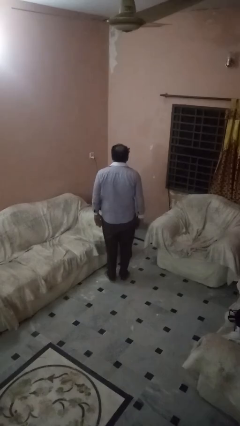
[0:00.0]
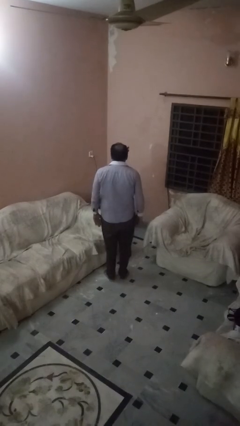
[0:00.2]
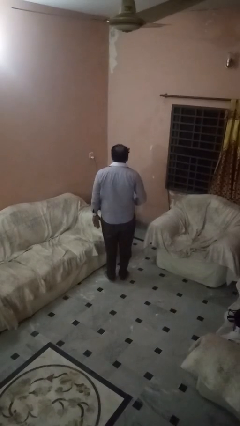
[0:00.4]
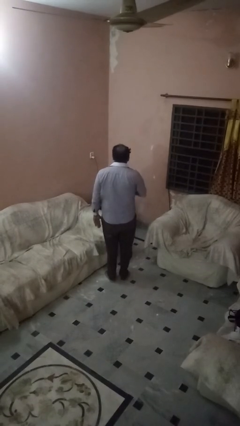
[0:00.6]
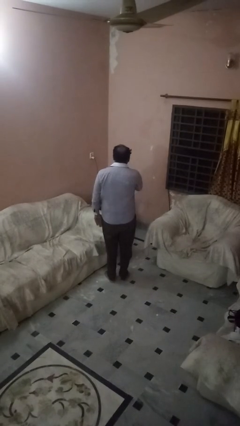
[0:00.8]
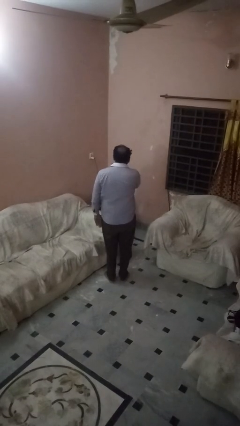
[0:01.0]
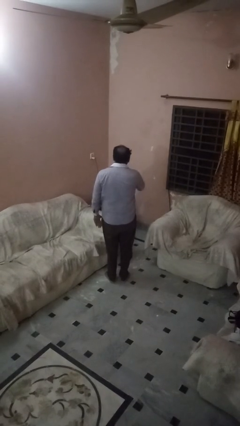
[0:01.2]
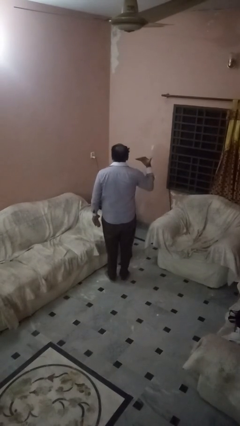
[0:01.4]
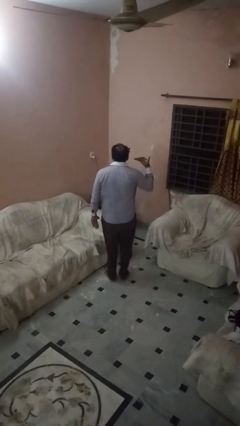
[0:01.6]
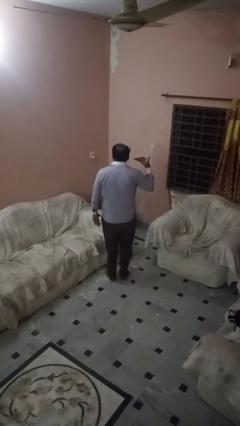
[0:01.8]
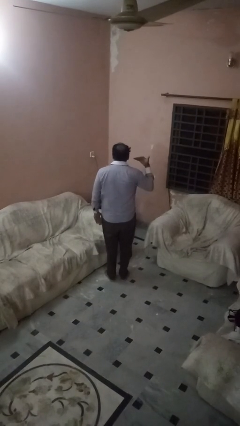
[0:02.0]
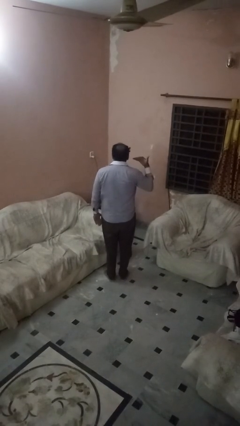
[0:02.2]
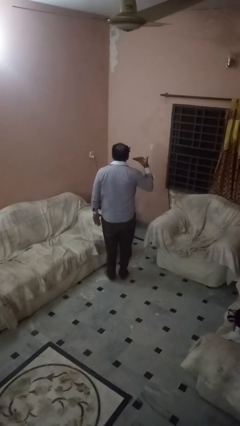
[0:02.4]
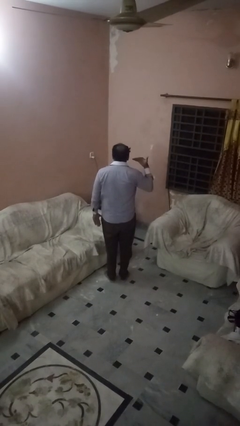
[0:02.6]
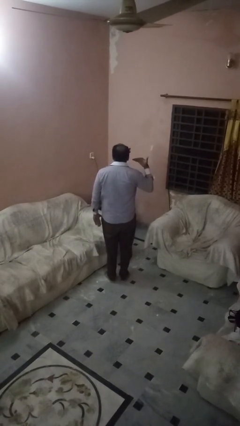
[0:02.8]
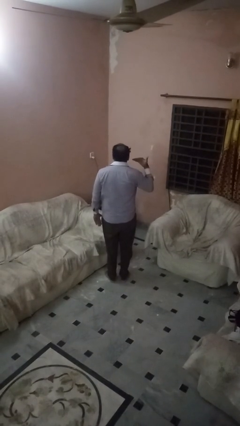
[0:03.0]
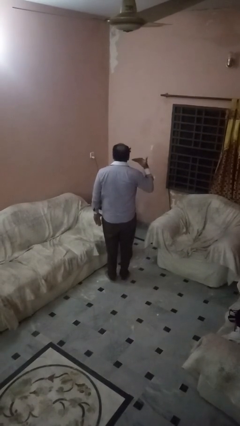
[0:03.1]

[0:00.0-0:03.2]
person gestures cut

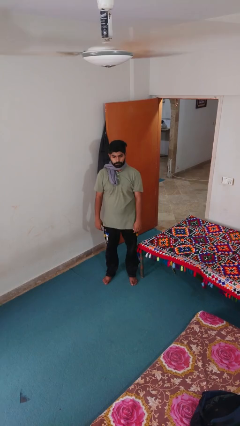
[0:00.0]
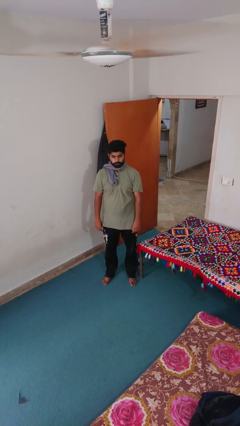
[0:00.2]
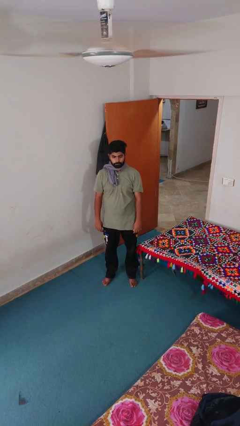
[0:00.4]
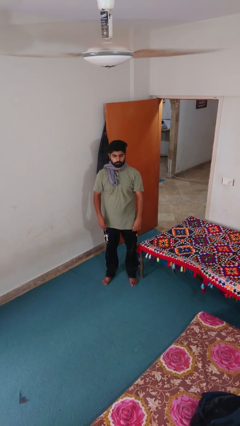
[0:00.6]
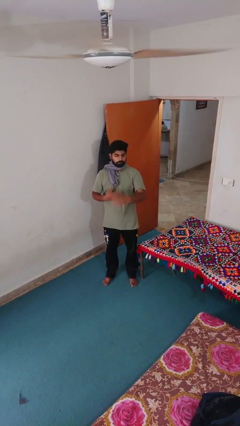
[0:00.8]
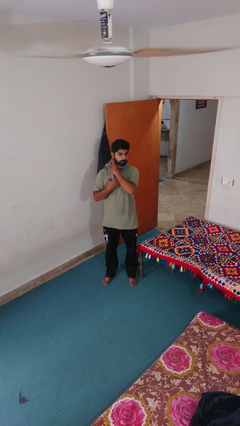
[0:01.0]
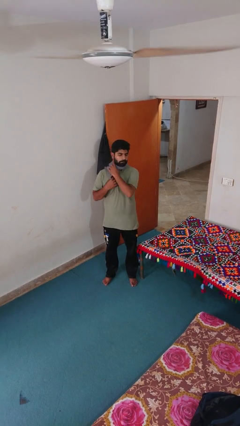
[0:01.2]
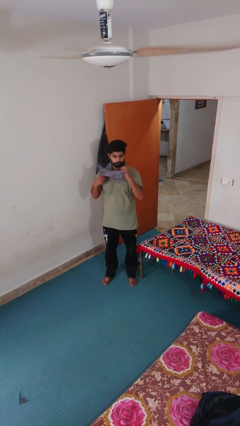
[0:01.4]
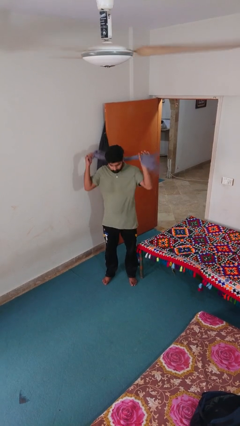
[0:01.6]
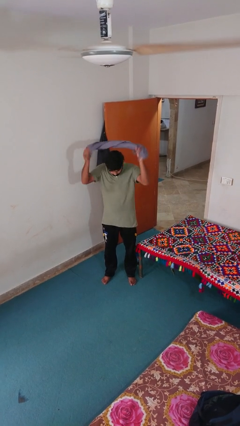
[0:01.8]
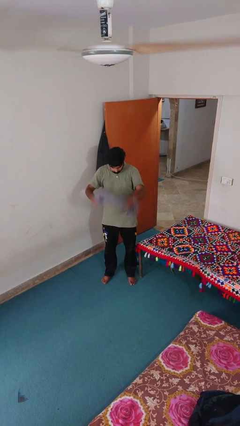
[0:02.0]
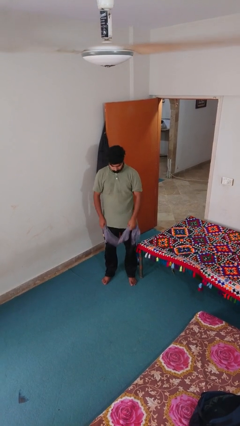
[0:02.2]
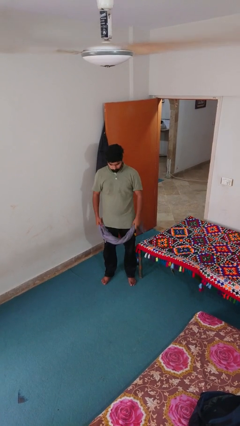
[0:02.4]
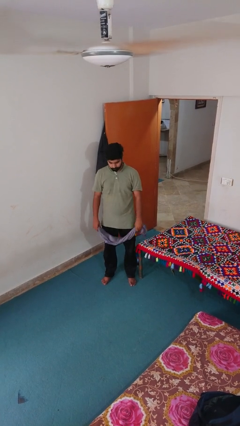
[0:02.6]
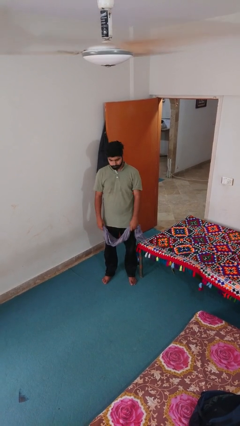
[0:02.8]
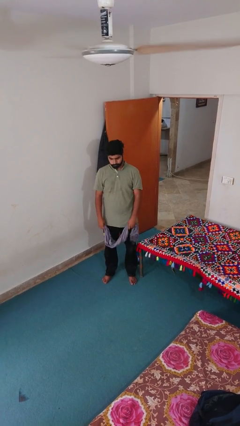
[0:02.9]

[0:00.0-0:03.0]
person takes off scarf

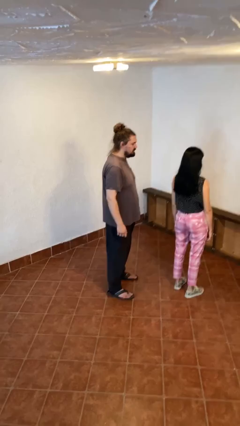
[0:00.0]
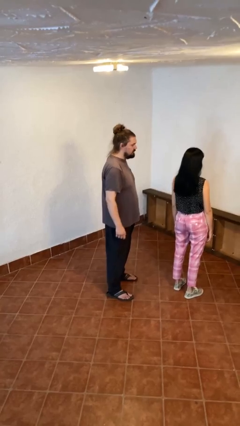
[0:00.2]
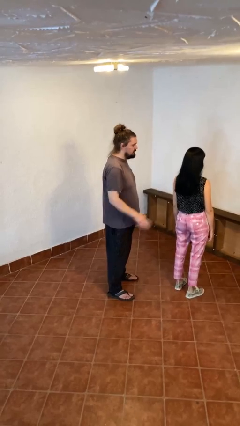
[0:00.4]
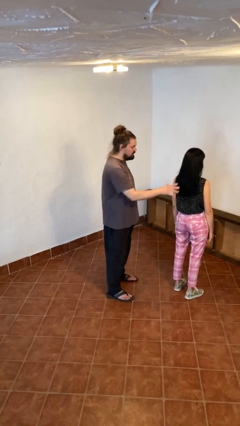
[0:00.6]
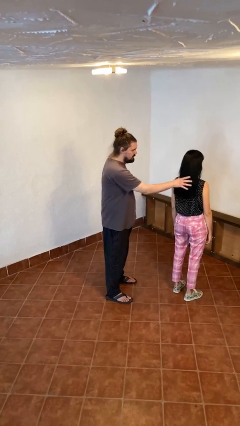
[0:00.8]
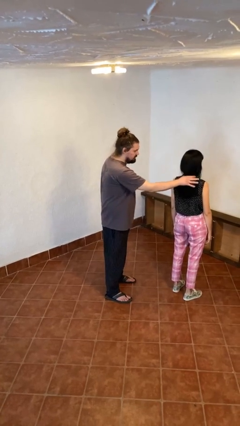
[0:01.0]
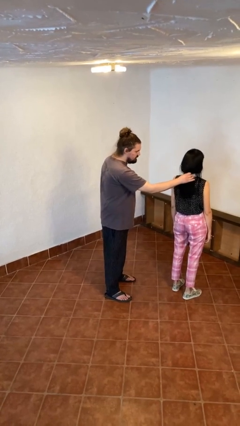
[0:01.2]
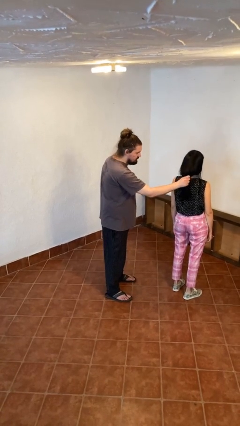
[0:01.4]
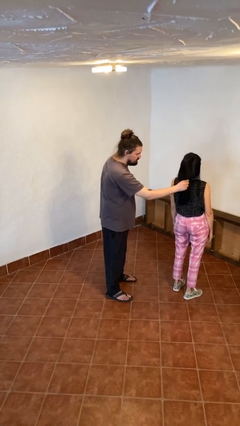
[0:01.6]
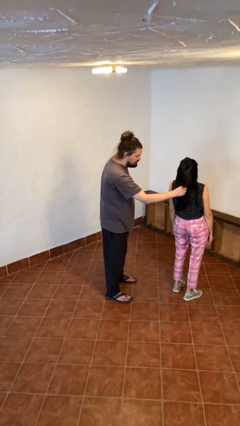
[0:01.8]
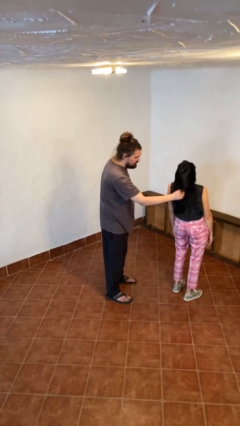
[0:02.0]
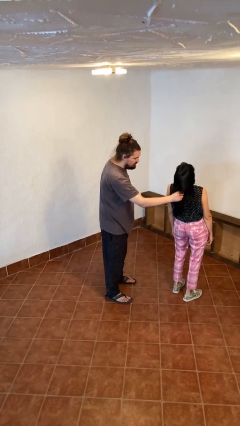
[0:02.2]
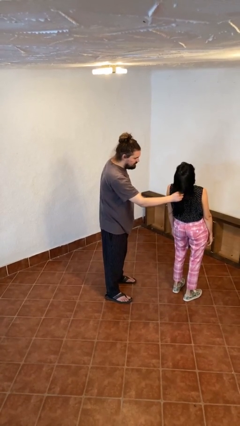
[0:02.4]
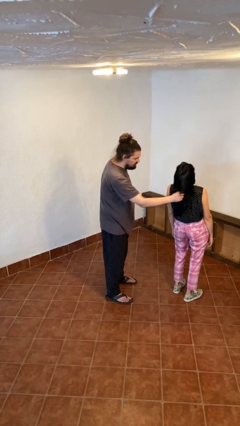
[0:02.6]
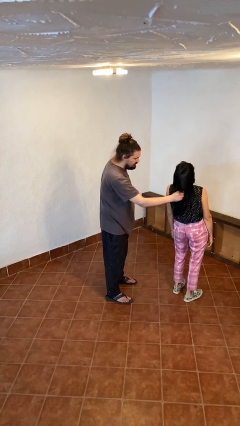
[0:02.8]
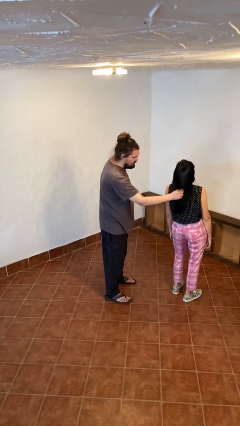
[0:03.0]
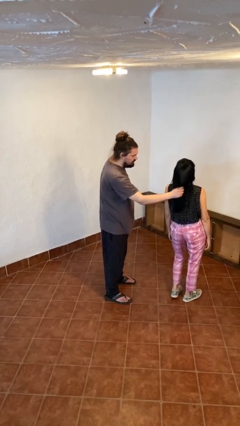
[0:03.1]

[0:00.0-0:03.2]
person grabs person by hair

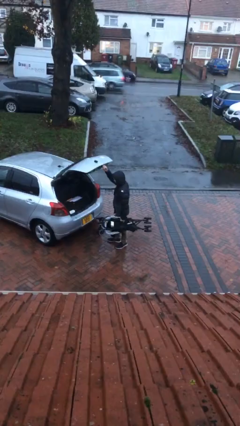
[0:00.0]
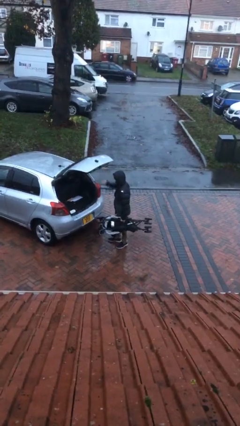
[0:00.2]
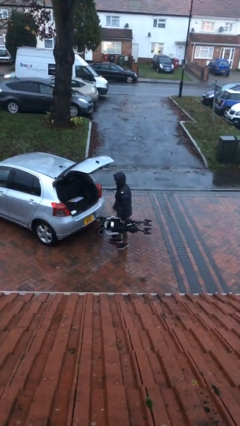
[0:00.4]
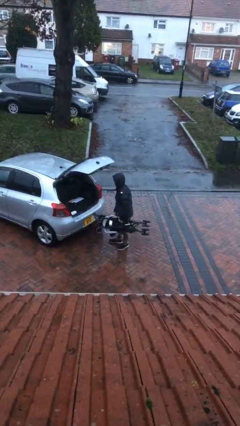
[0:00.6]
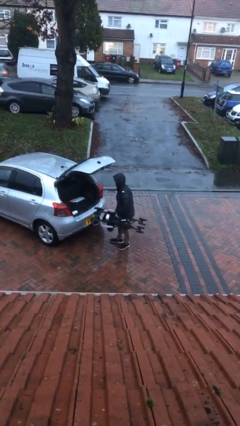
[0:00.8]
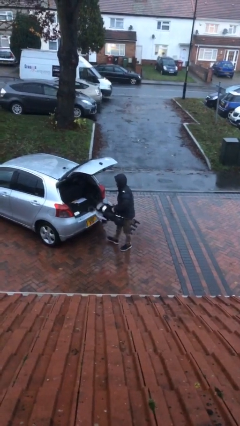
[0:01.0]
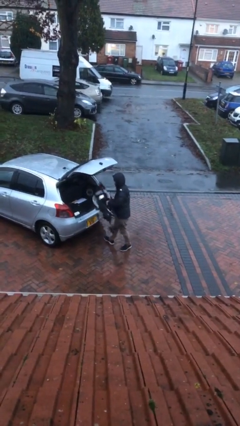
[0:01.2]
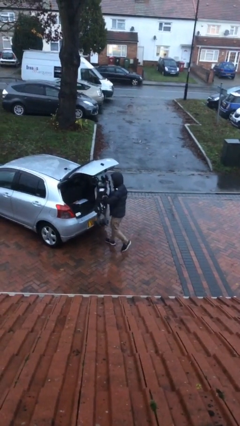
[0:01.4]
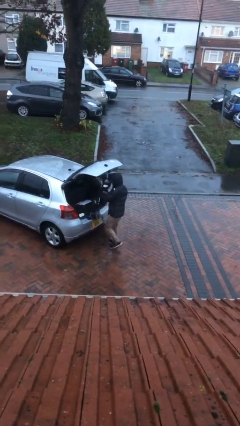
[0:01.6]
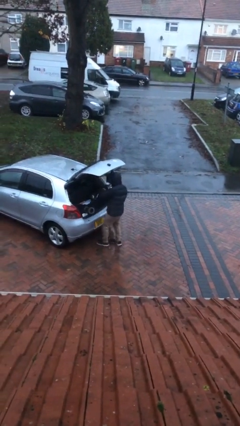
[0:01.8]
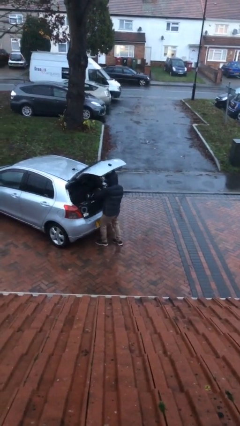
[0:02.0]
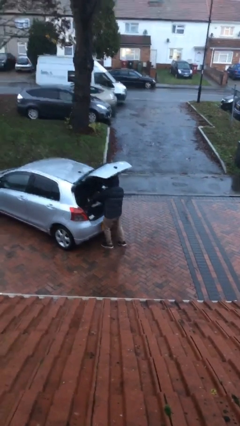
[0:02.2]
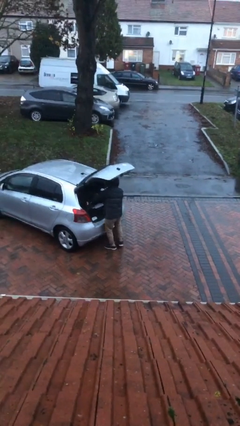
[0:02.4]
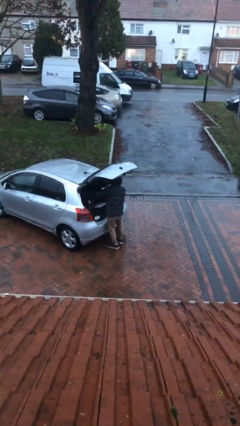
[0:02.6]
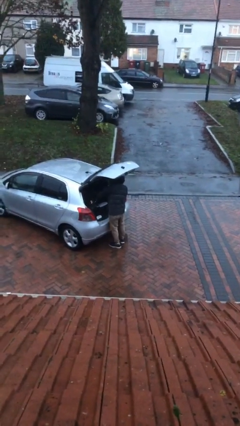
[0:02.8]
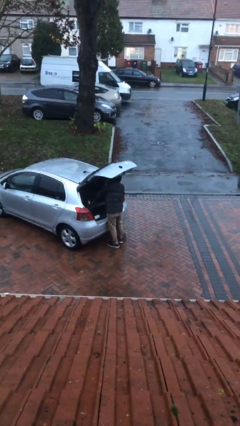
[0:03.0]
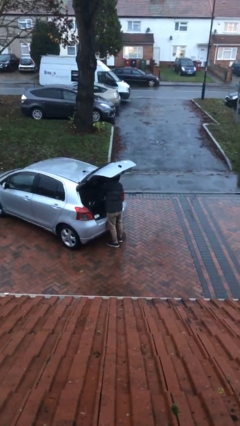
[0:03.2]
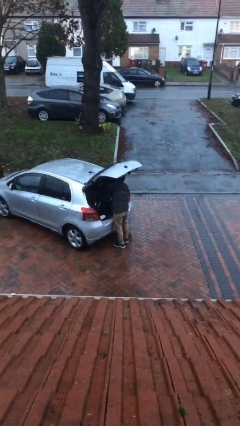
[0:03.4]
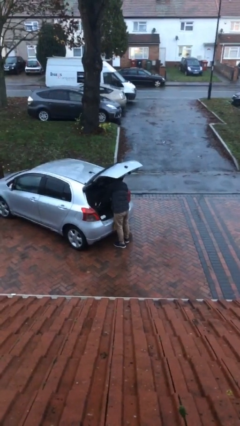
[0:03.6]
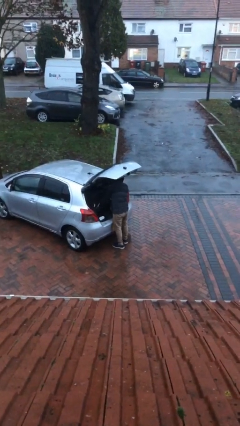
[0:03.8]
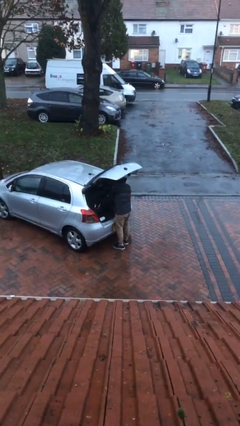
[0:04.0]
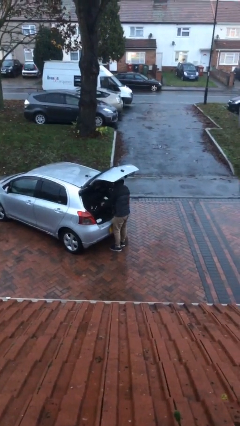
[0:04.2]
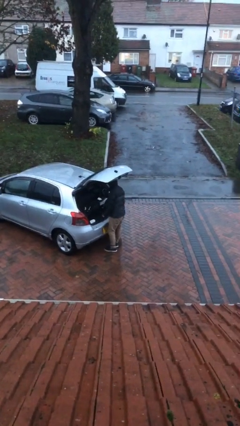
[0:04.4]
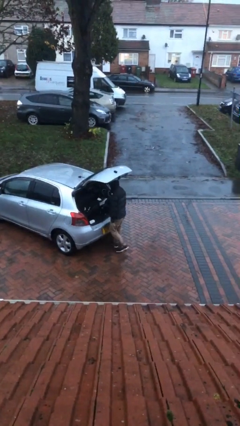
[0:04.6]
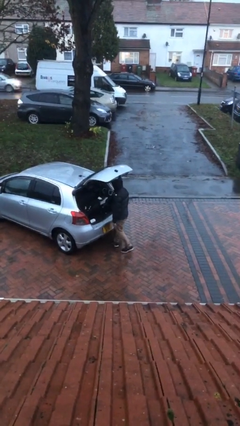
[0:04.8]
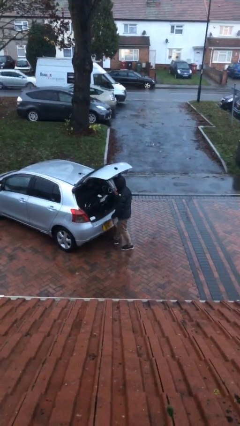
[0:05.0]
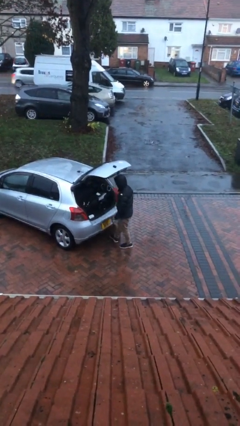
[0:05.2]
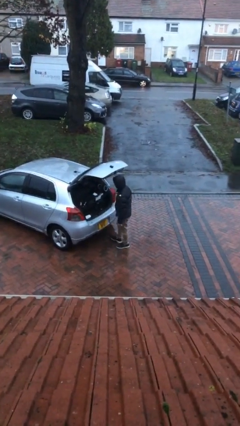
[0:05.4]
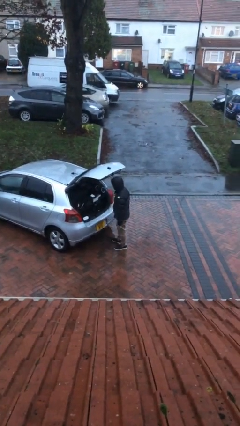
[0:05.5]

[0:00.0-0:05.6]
person loads car

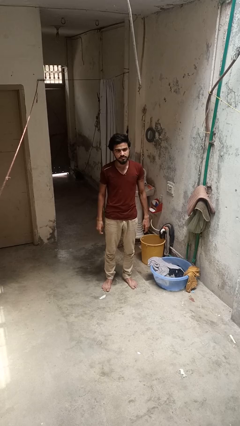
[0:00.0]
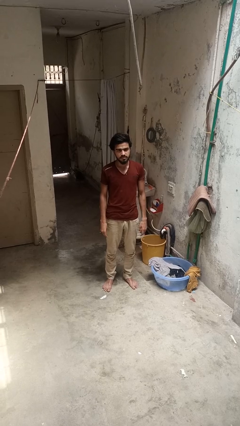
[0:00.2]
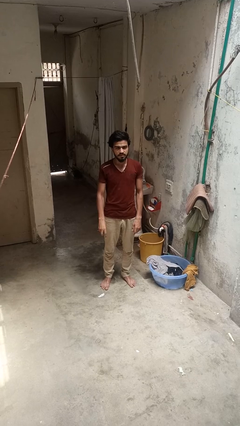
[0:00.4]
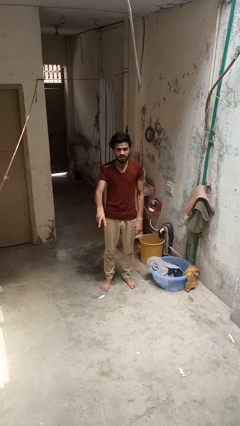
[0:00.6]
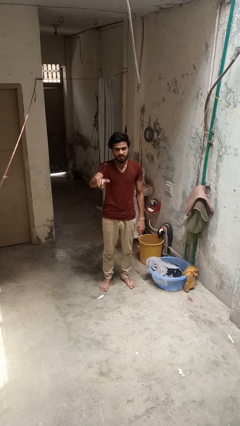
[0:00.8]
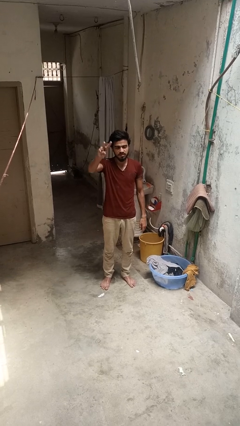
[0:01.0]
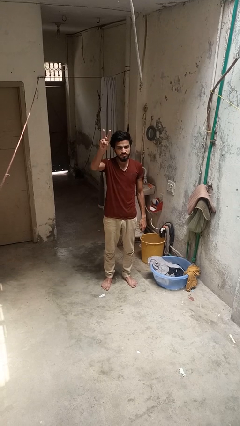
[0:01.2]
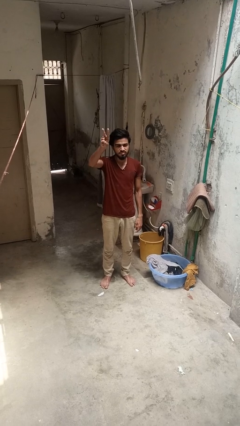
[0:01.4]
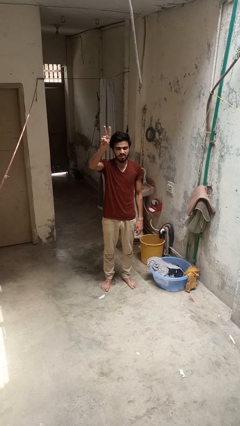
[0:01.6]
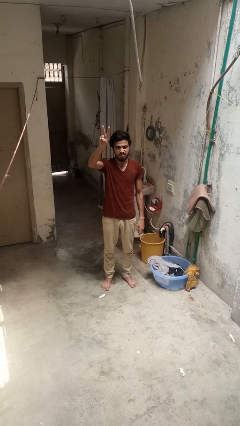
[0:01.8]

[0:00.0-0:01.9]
person gestures peace

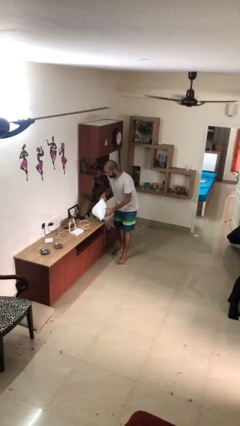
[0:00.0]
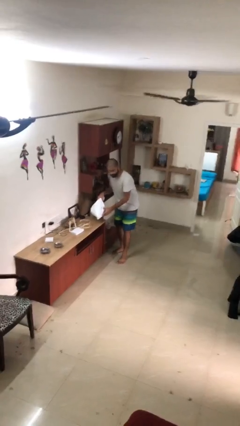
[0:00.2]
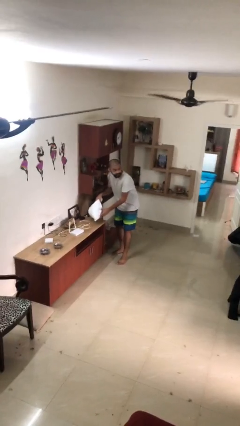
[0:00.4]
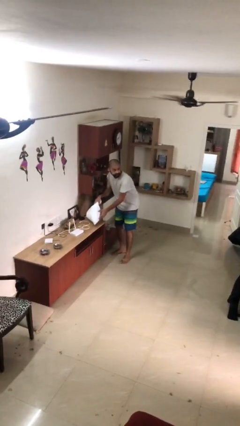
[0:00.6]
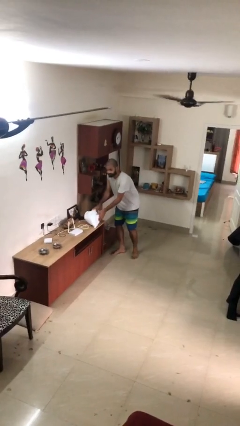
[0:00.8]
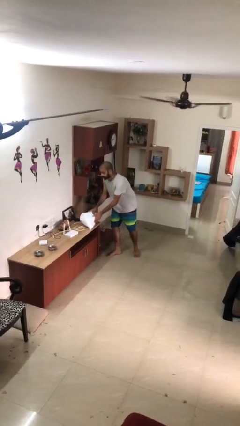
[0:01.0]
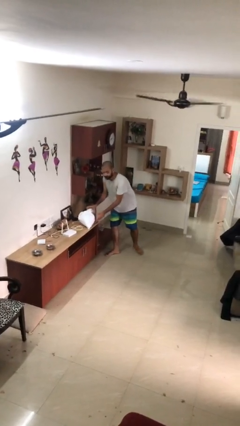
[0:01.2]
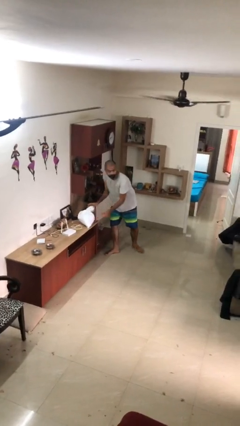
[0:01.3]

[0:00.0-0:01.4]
person puts down object on table
